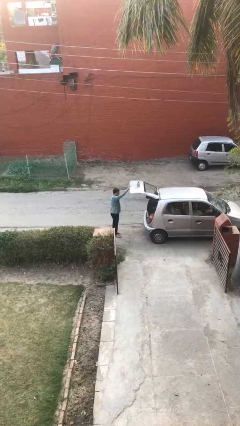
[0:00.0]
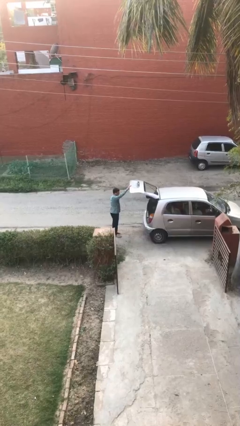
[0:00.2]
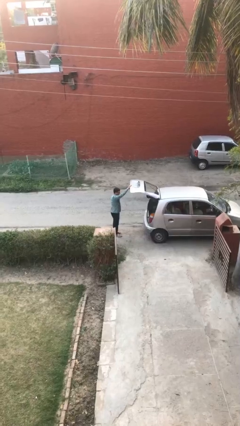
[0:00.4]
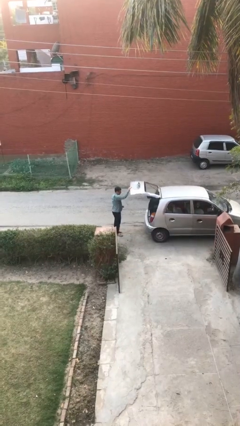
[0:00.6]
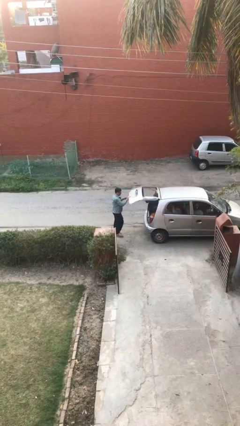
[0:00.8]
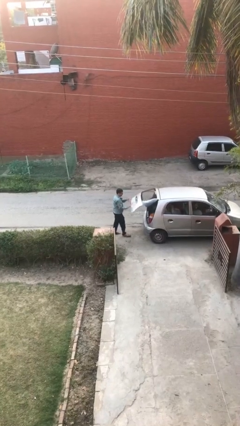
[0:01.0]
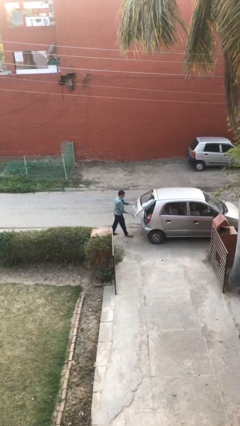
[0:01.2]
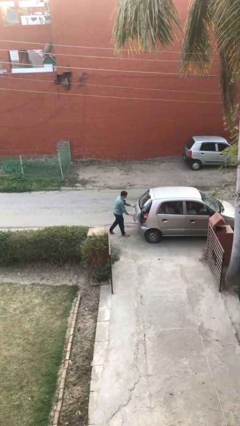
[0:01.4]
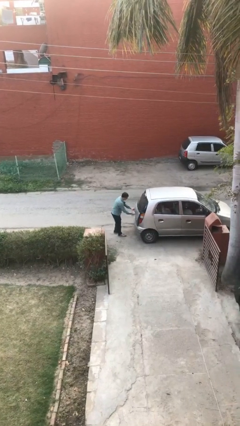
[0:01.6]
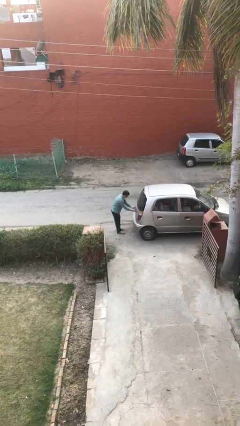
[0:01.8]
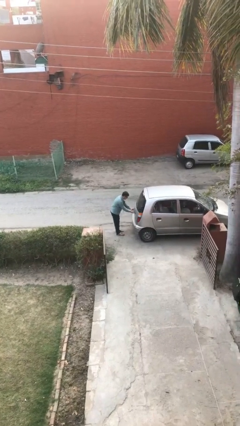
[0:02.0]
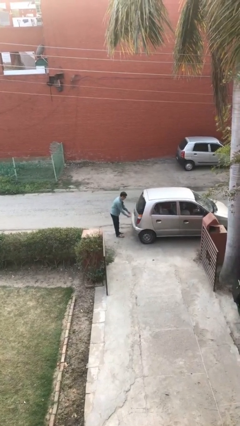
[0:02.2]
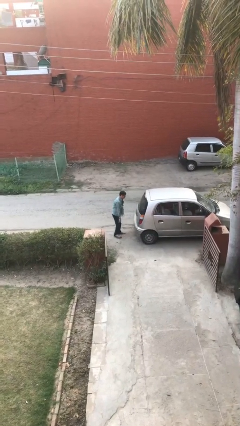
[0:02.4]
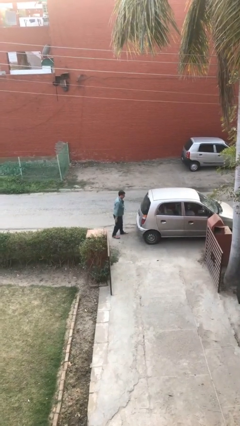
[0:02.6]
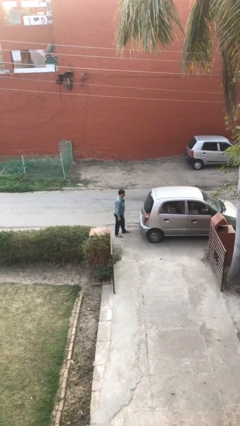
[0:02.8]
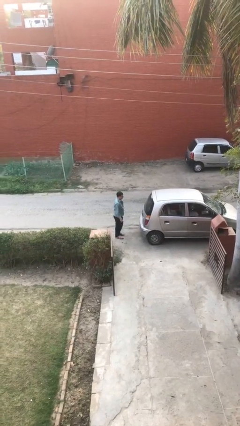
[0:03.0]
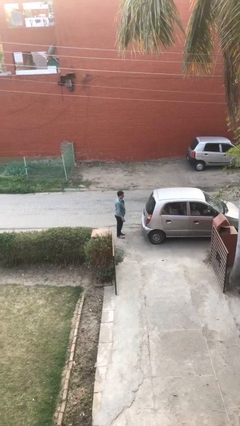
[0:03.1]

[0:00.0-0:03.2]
person closes car trunk

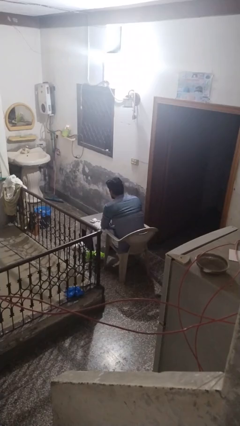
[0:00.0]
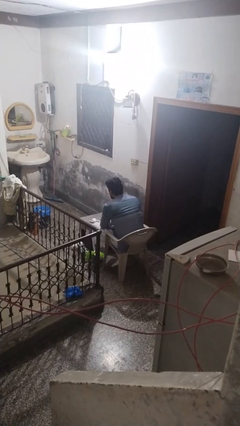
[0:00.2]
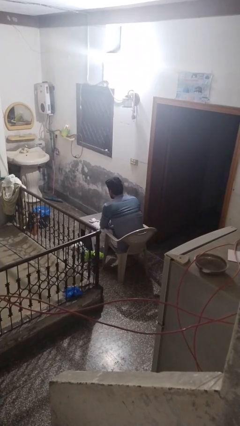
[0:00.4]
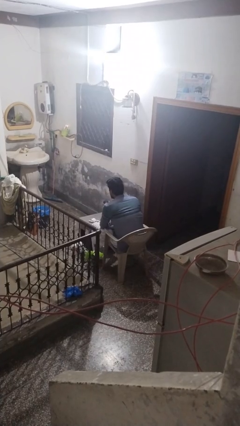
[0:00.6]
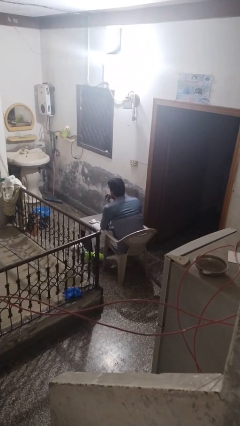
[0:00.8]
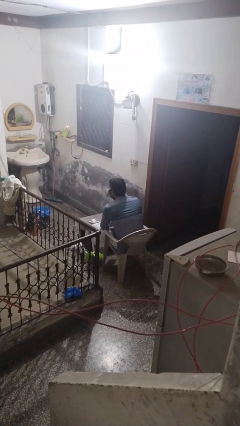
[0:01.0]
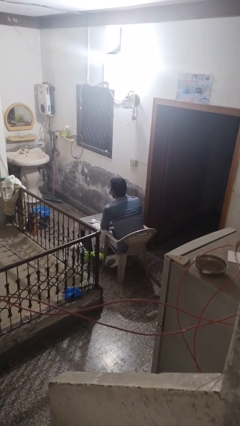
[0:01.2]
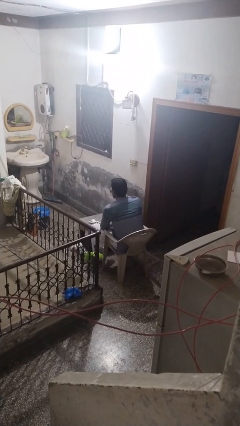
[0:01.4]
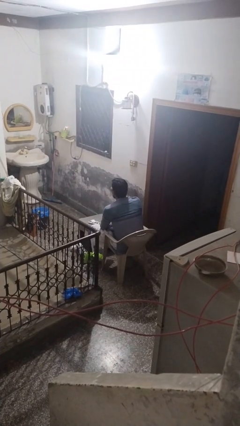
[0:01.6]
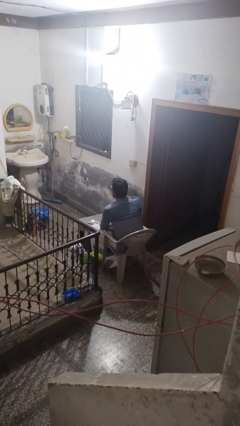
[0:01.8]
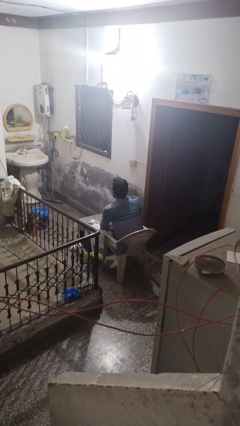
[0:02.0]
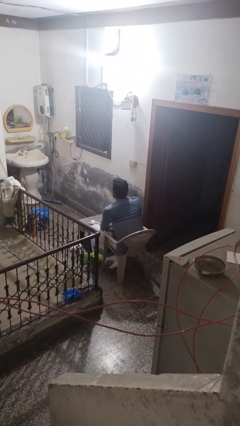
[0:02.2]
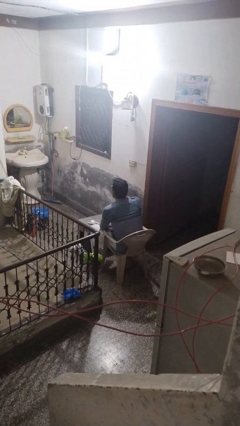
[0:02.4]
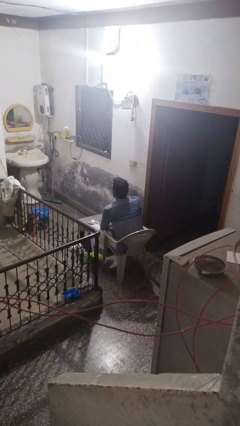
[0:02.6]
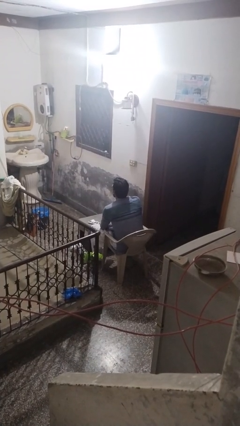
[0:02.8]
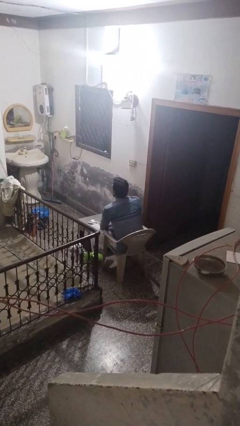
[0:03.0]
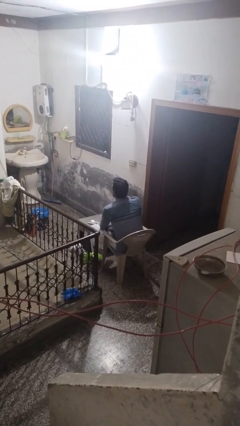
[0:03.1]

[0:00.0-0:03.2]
person drinks from cup

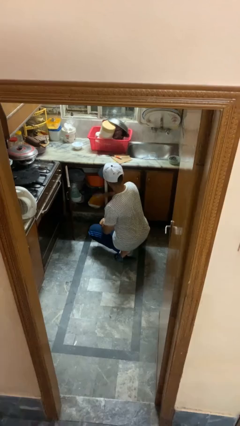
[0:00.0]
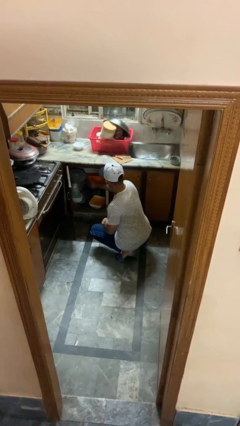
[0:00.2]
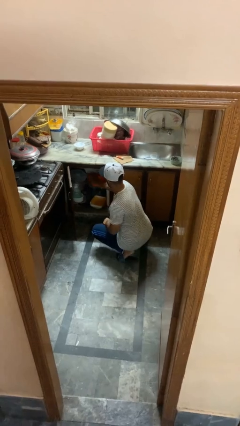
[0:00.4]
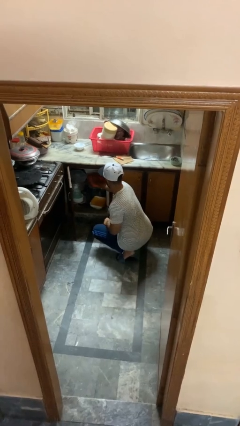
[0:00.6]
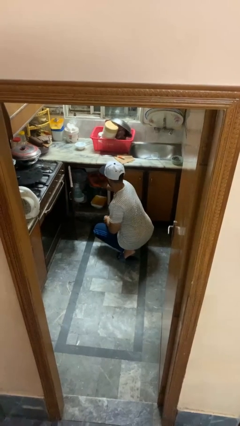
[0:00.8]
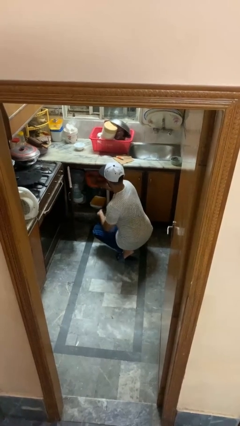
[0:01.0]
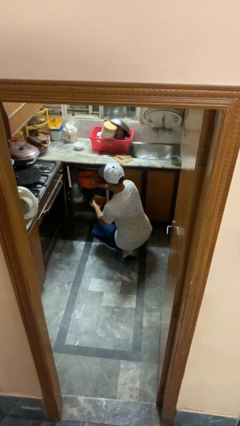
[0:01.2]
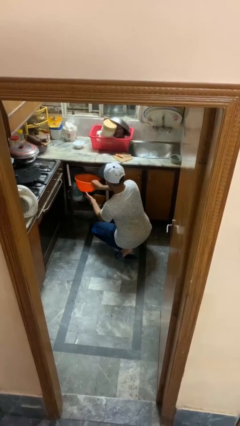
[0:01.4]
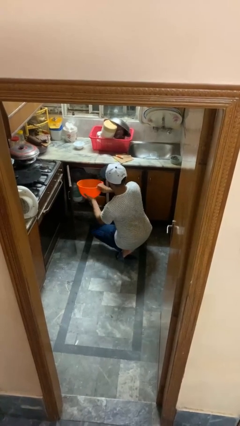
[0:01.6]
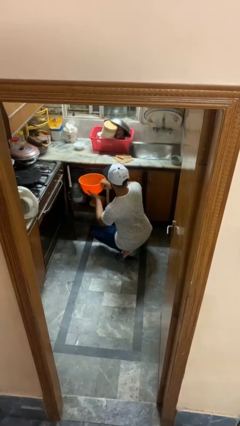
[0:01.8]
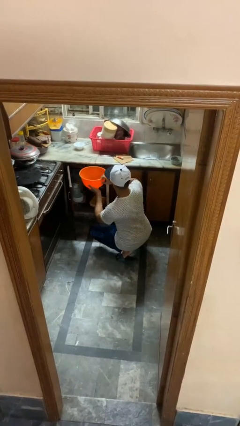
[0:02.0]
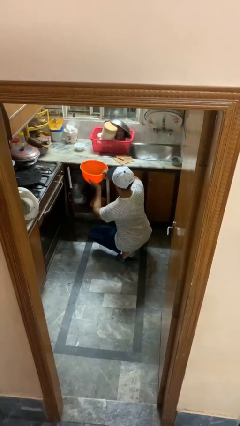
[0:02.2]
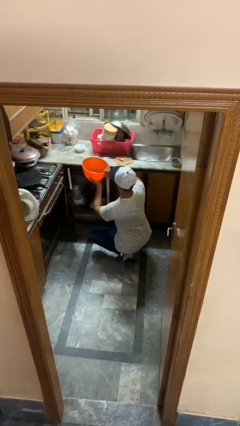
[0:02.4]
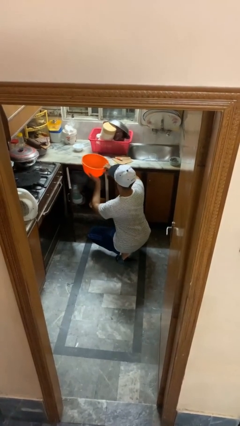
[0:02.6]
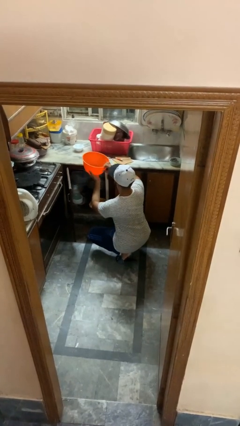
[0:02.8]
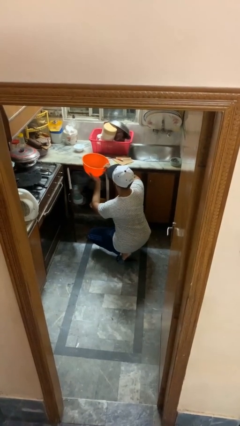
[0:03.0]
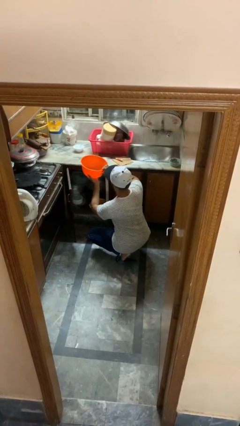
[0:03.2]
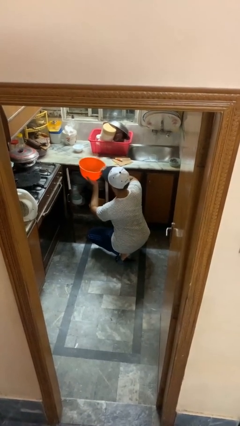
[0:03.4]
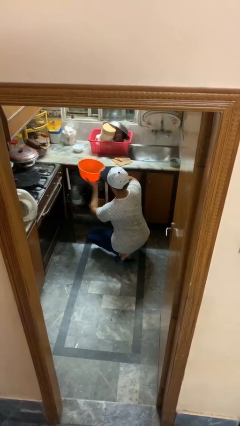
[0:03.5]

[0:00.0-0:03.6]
person takes object from kitchen drawer

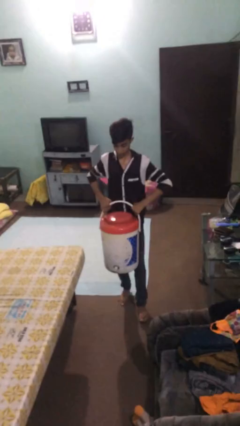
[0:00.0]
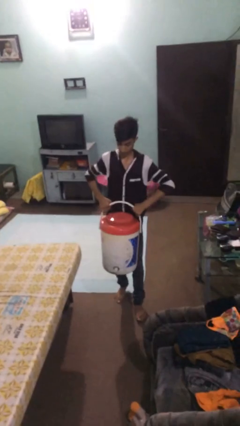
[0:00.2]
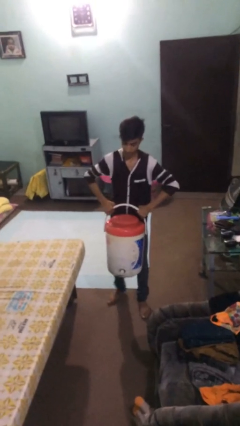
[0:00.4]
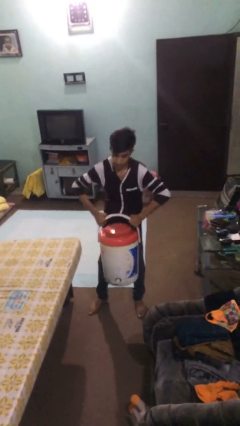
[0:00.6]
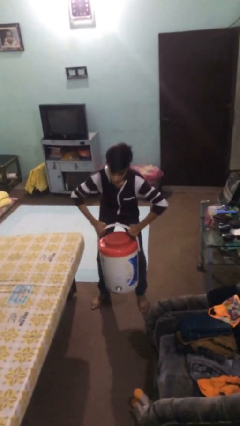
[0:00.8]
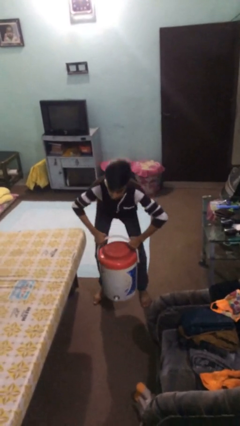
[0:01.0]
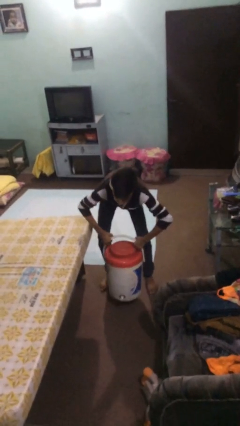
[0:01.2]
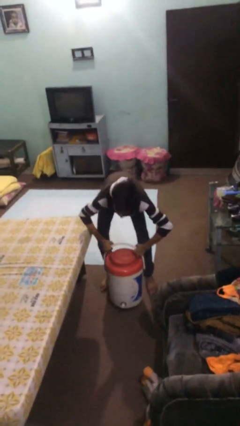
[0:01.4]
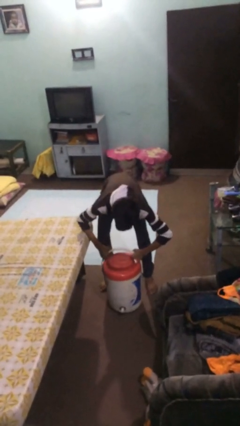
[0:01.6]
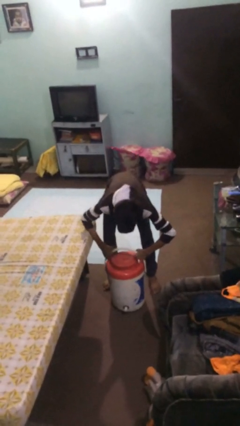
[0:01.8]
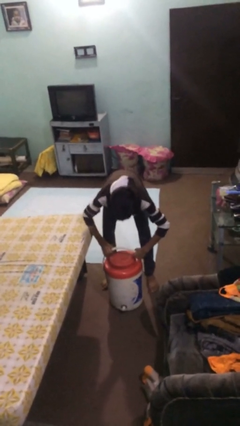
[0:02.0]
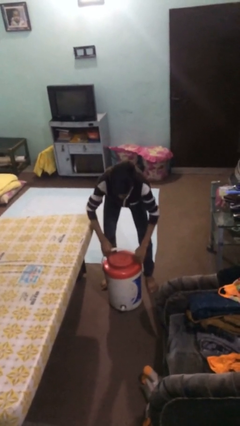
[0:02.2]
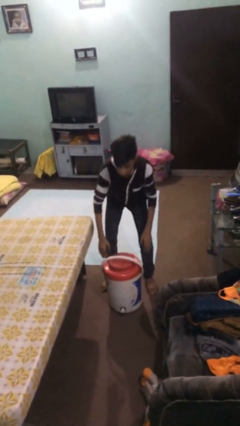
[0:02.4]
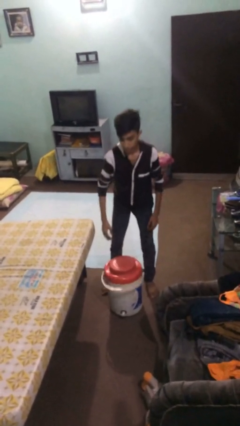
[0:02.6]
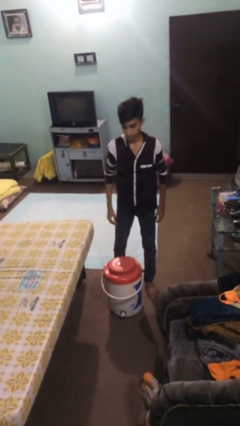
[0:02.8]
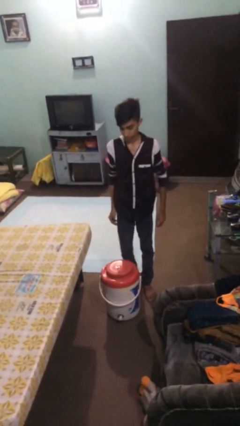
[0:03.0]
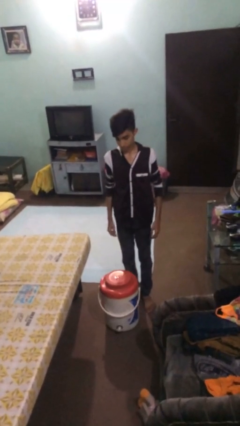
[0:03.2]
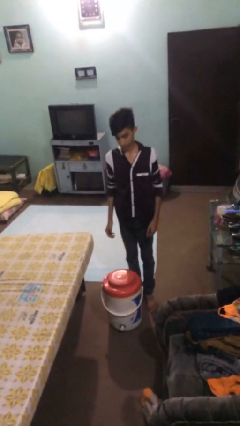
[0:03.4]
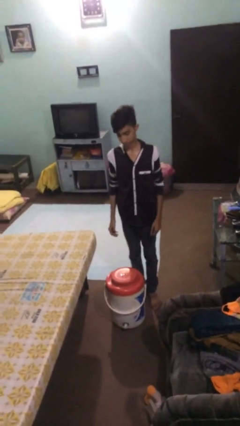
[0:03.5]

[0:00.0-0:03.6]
person puts down object on floor

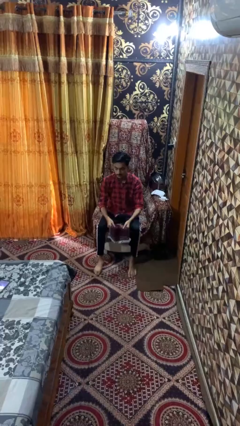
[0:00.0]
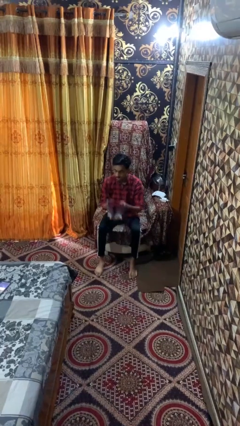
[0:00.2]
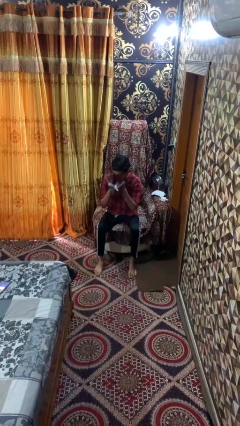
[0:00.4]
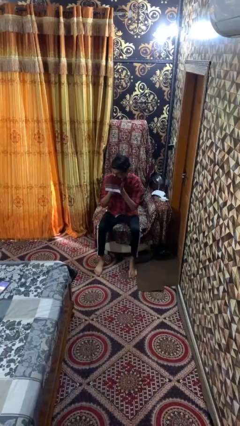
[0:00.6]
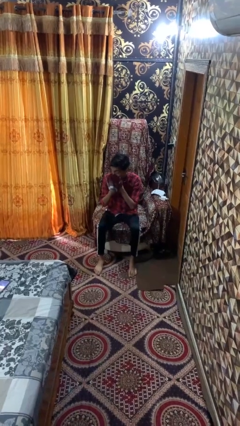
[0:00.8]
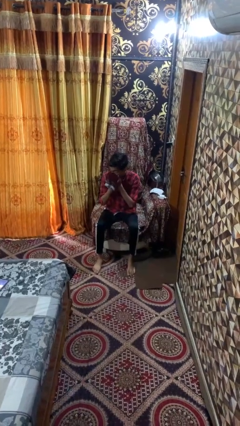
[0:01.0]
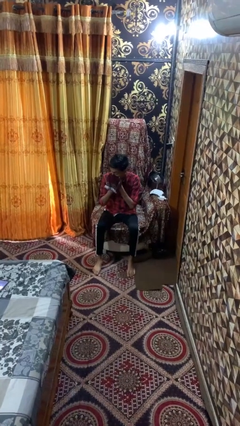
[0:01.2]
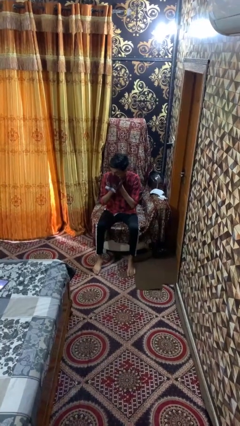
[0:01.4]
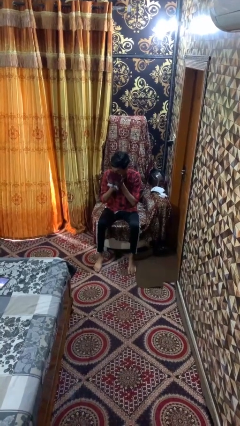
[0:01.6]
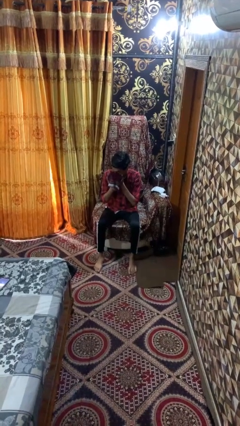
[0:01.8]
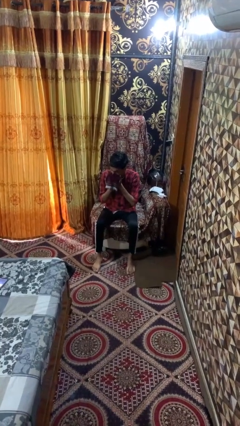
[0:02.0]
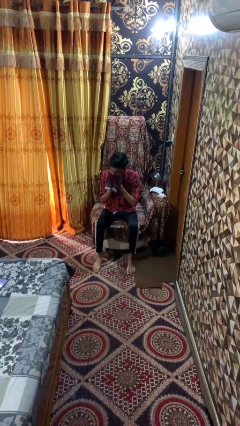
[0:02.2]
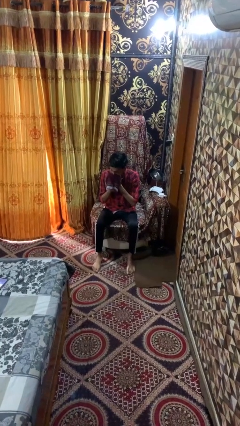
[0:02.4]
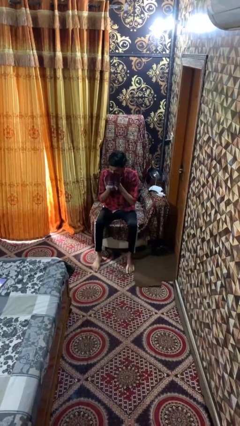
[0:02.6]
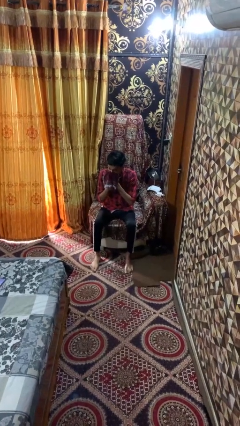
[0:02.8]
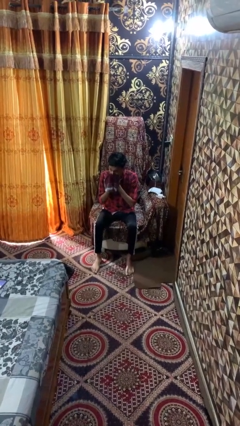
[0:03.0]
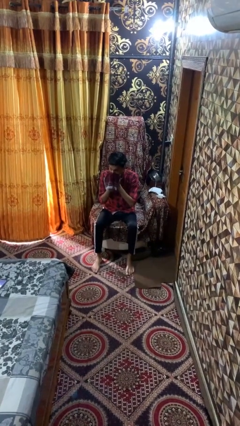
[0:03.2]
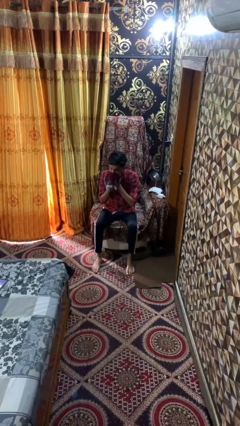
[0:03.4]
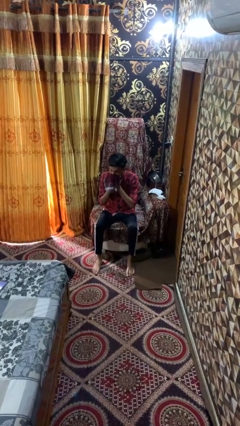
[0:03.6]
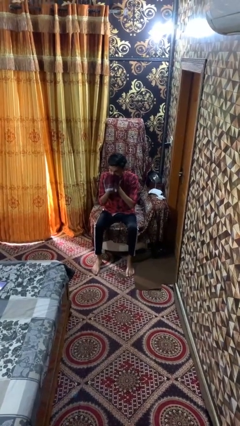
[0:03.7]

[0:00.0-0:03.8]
person blows nose

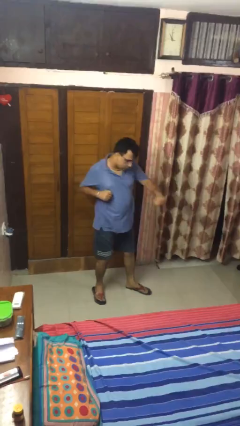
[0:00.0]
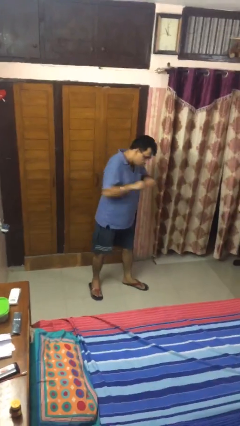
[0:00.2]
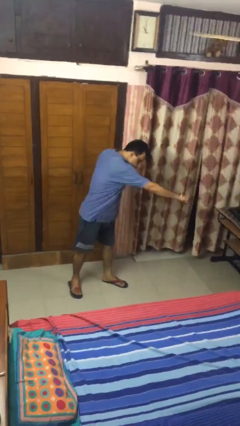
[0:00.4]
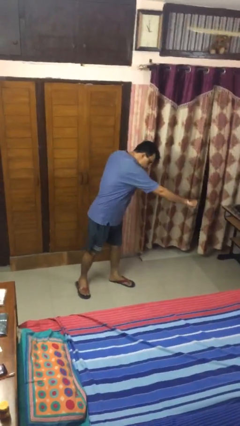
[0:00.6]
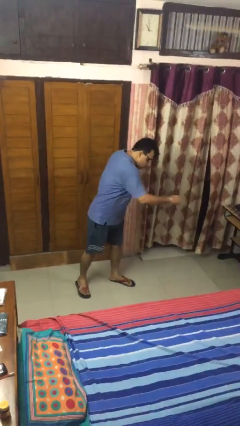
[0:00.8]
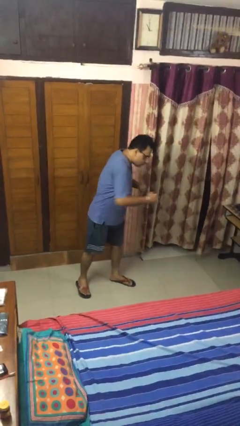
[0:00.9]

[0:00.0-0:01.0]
person karate chop
